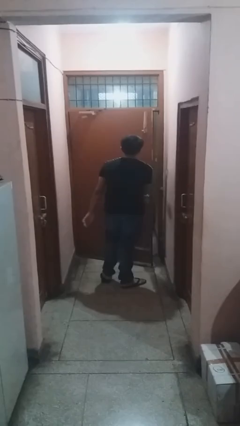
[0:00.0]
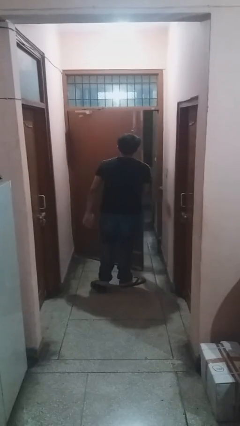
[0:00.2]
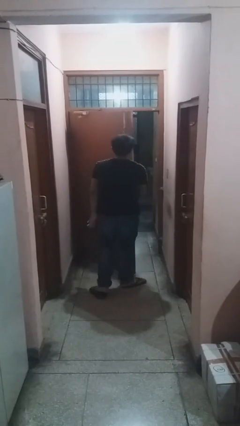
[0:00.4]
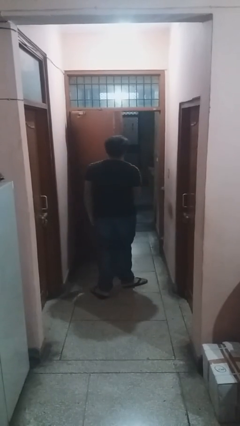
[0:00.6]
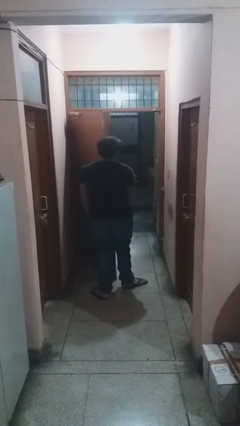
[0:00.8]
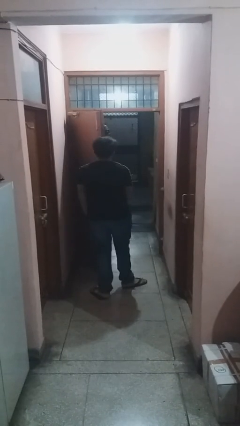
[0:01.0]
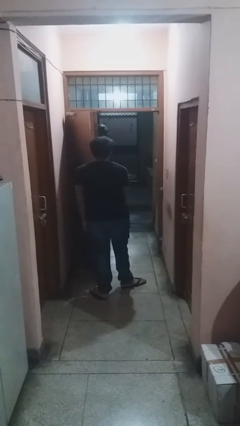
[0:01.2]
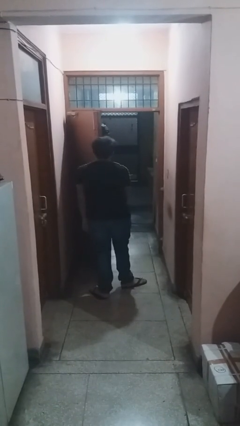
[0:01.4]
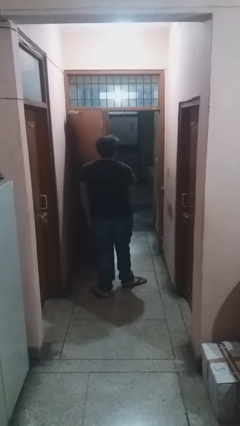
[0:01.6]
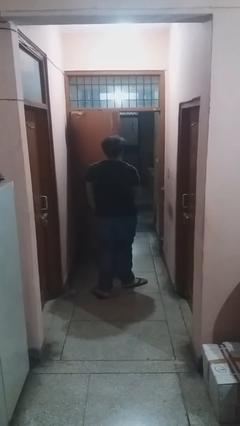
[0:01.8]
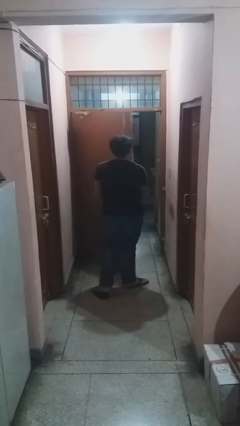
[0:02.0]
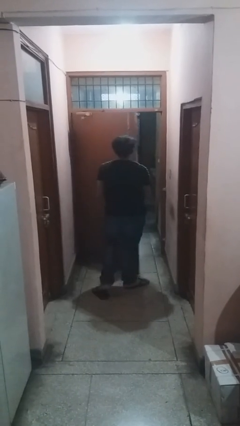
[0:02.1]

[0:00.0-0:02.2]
person opens facility door

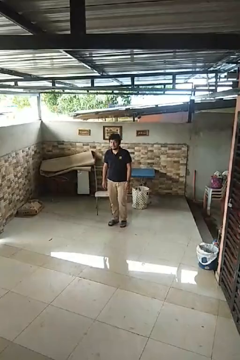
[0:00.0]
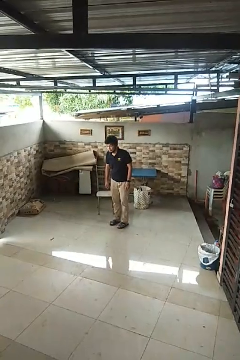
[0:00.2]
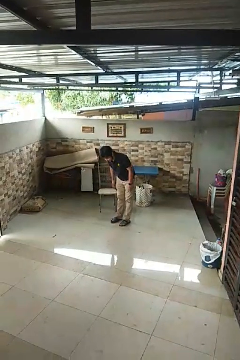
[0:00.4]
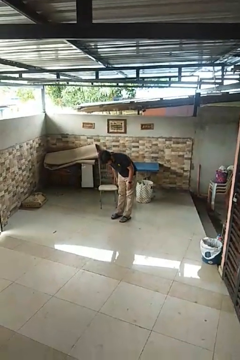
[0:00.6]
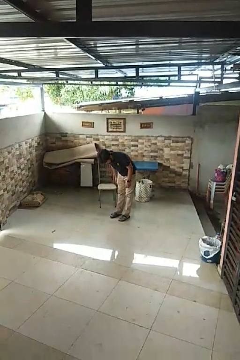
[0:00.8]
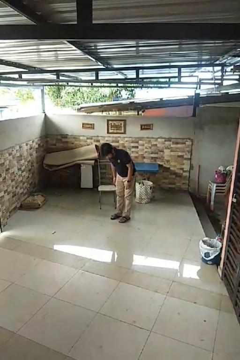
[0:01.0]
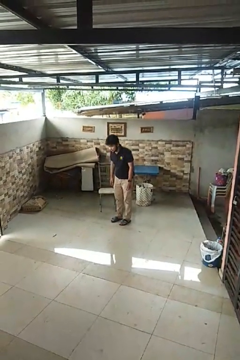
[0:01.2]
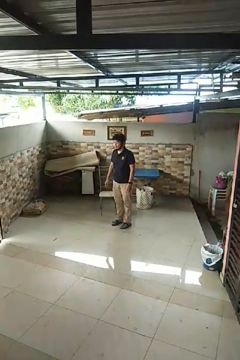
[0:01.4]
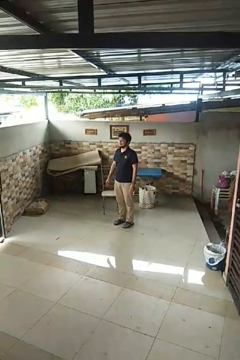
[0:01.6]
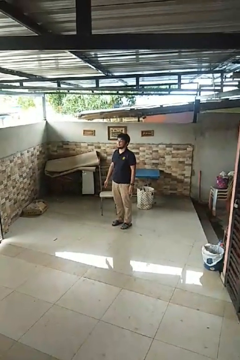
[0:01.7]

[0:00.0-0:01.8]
person bows

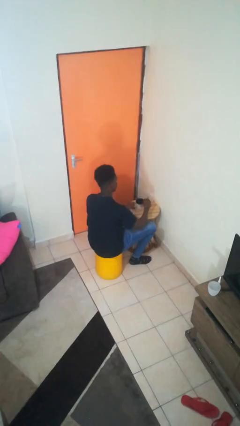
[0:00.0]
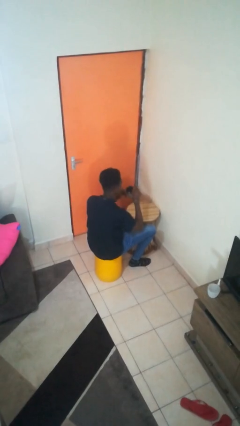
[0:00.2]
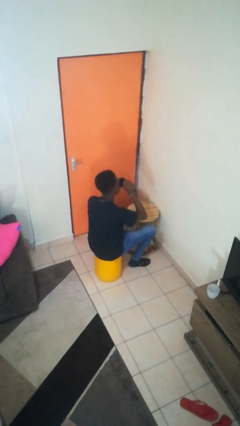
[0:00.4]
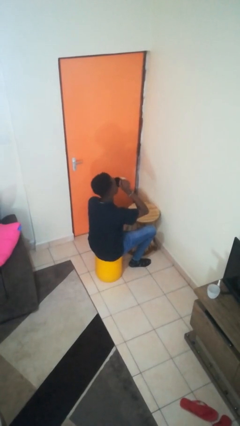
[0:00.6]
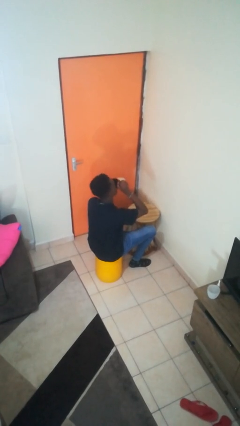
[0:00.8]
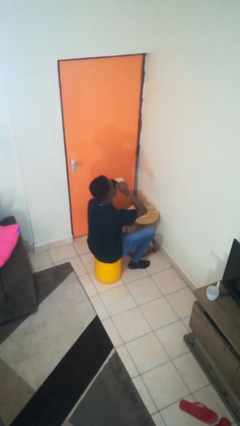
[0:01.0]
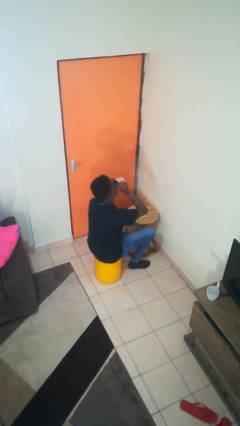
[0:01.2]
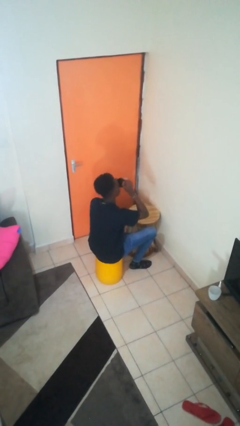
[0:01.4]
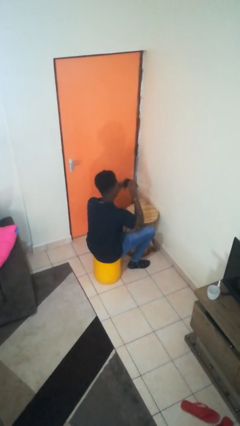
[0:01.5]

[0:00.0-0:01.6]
person drinks from mug

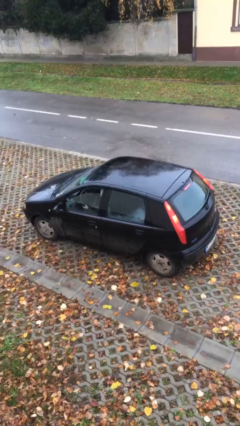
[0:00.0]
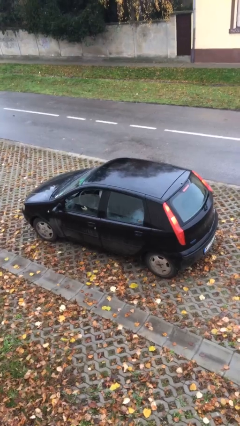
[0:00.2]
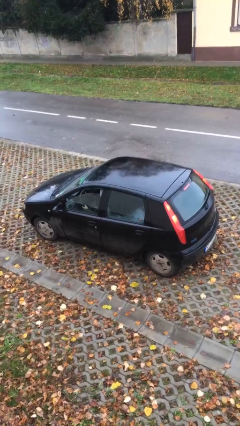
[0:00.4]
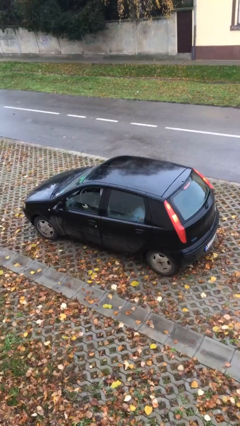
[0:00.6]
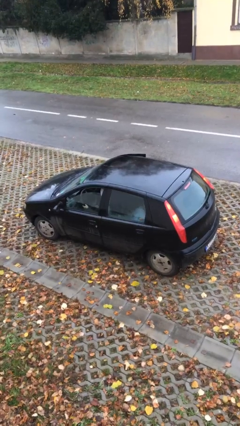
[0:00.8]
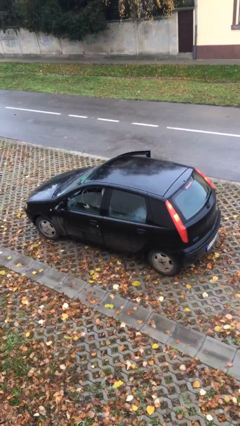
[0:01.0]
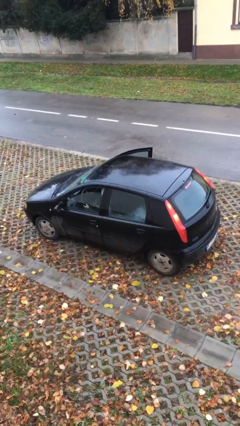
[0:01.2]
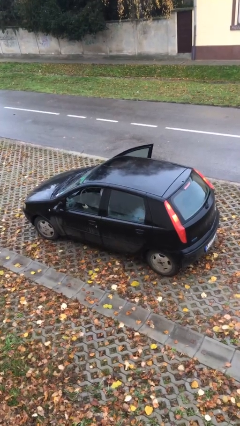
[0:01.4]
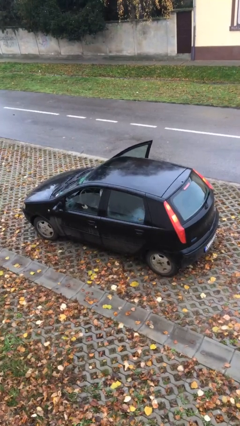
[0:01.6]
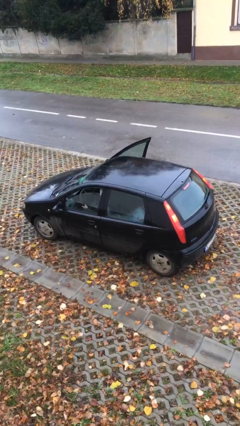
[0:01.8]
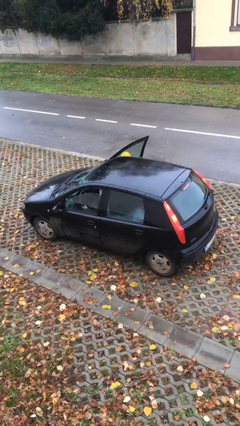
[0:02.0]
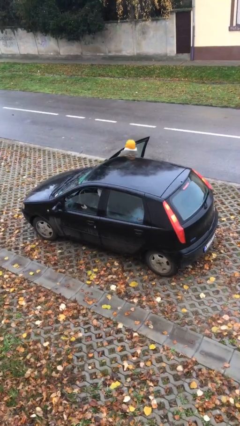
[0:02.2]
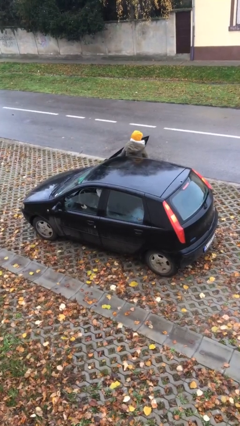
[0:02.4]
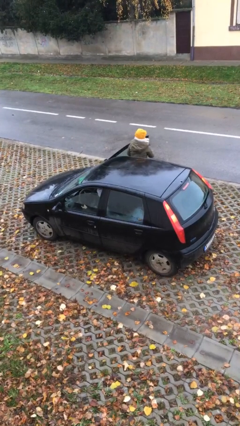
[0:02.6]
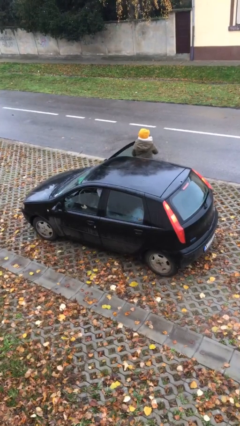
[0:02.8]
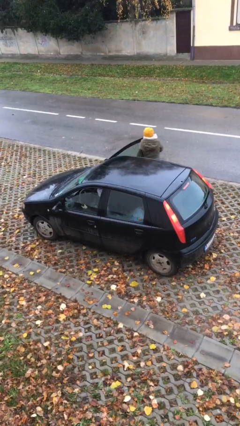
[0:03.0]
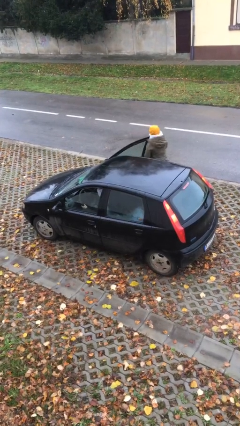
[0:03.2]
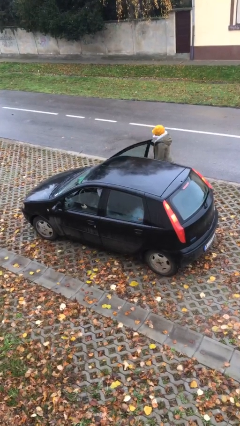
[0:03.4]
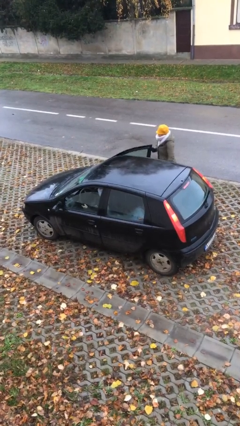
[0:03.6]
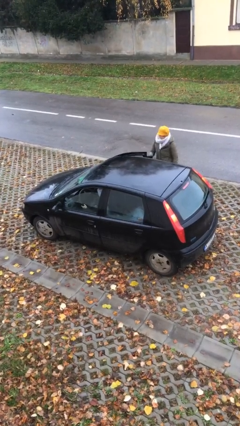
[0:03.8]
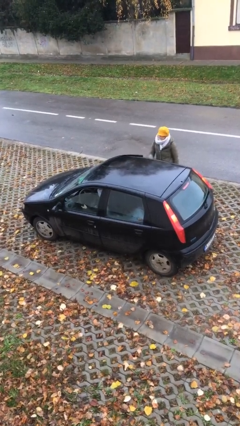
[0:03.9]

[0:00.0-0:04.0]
car drops off person

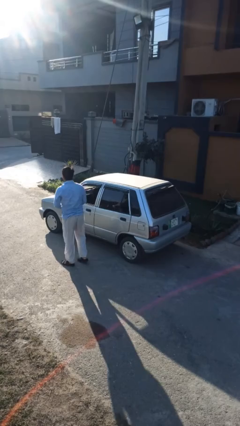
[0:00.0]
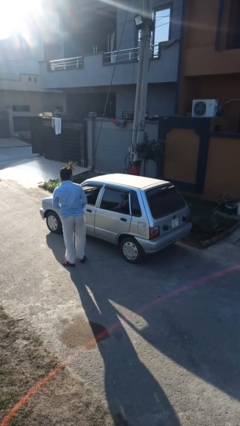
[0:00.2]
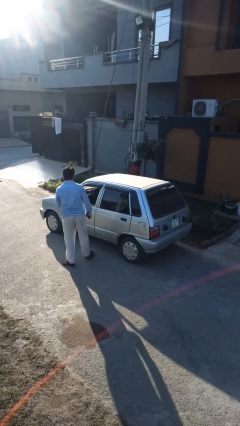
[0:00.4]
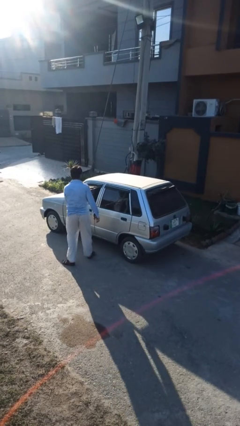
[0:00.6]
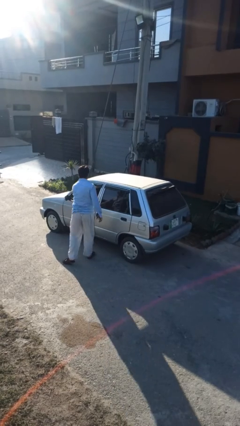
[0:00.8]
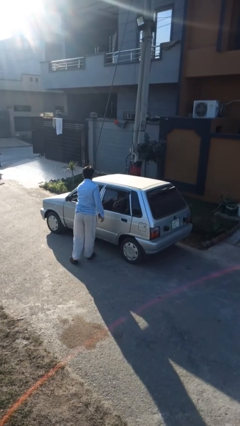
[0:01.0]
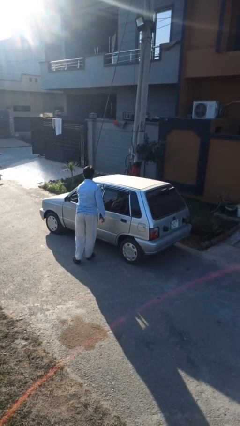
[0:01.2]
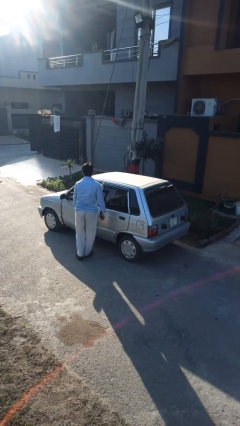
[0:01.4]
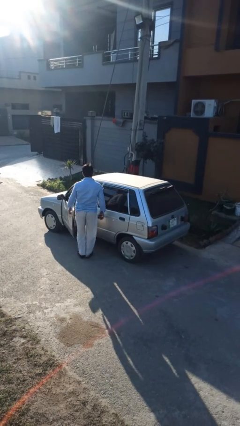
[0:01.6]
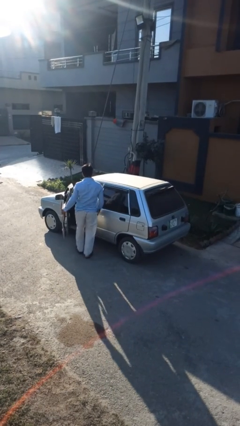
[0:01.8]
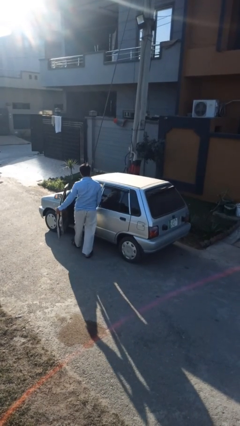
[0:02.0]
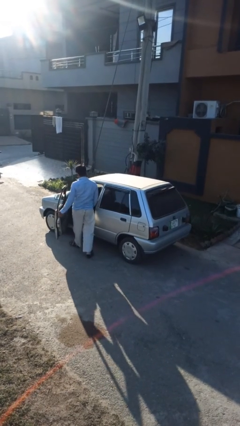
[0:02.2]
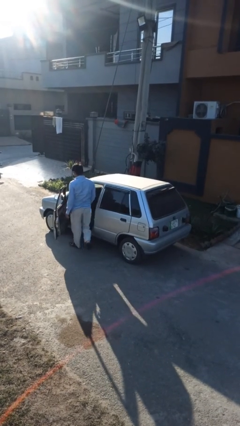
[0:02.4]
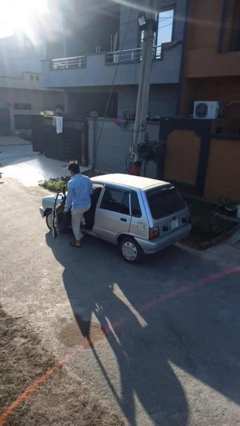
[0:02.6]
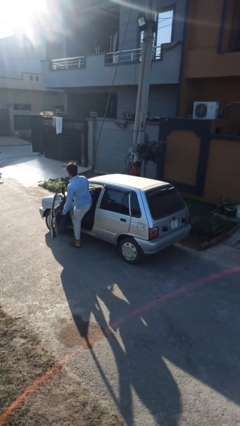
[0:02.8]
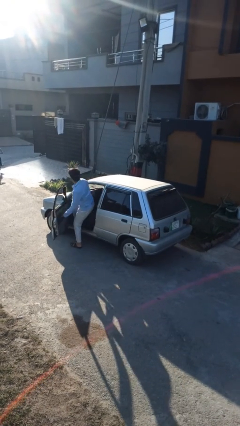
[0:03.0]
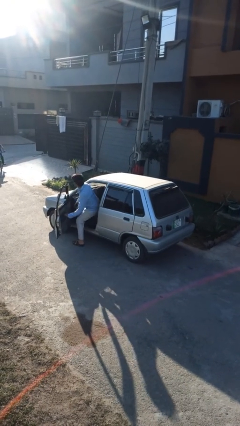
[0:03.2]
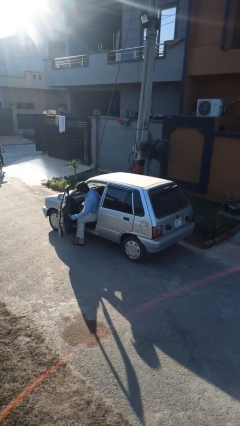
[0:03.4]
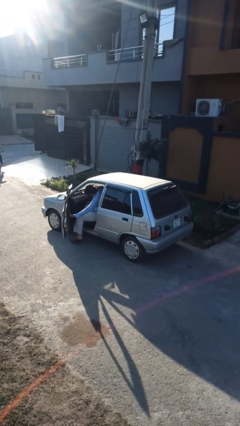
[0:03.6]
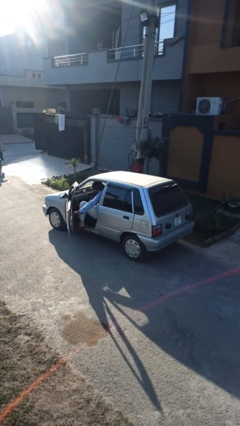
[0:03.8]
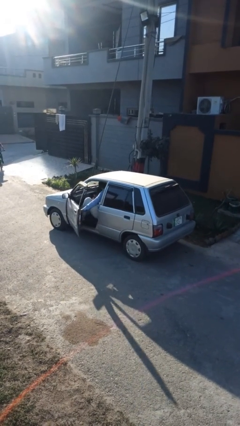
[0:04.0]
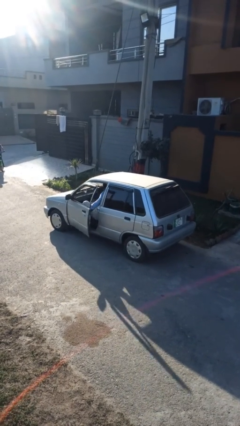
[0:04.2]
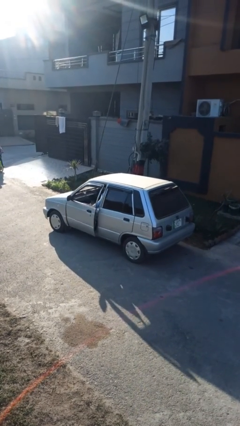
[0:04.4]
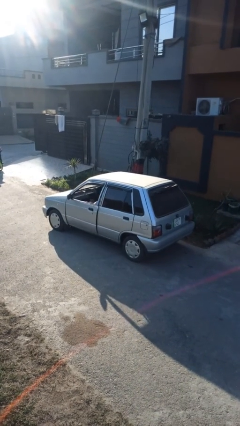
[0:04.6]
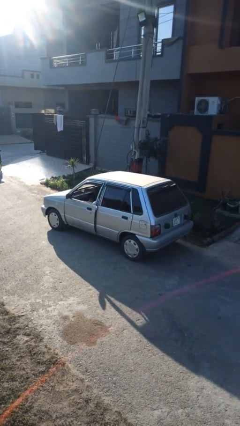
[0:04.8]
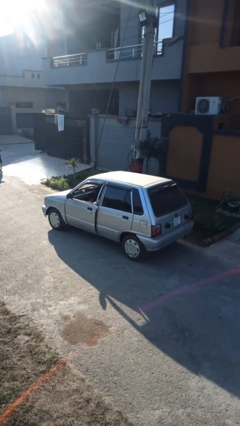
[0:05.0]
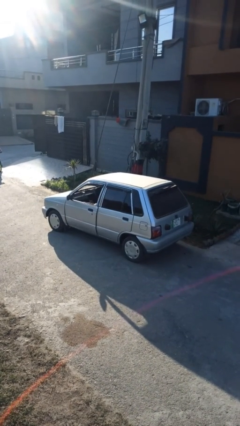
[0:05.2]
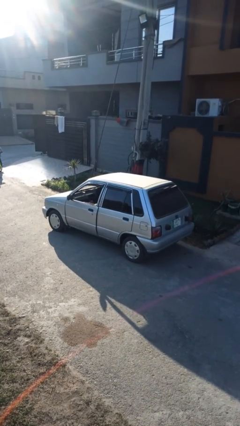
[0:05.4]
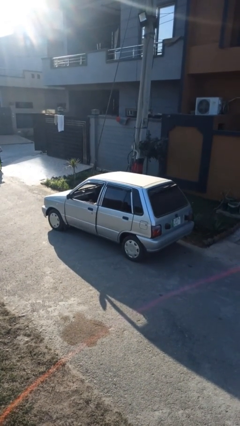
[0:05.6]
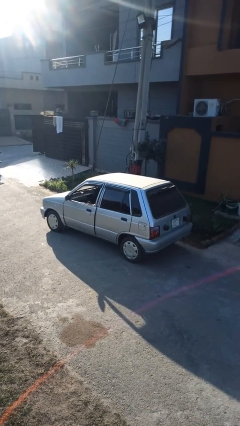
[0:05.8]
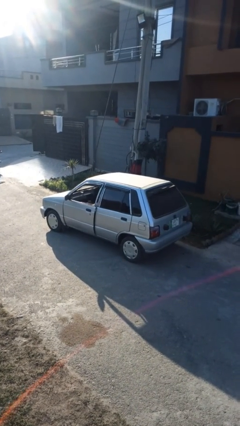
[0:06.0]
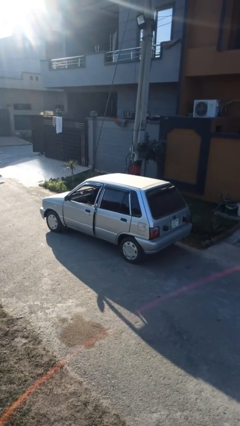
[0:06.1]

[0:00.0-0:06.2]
car picks up person

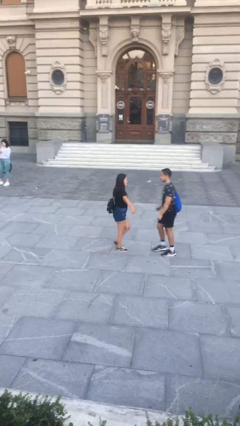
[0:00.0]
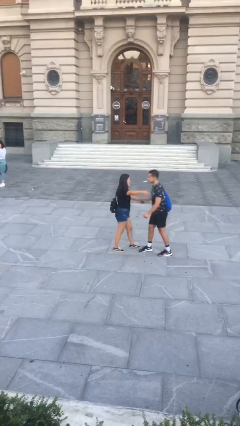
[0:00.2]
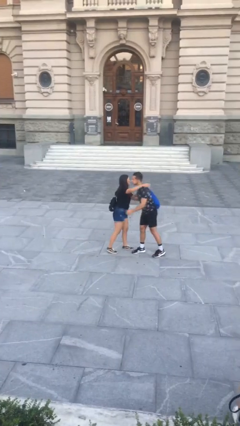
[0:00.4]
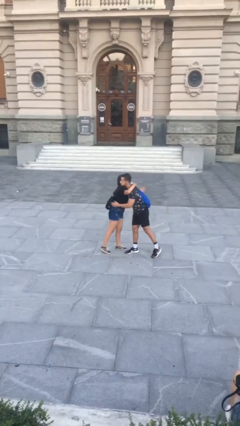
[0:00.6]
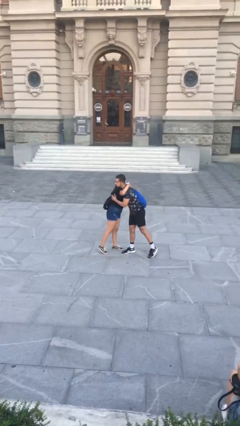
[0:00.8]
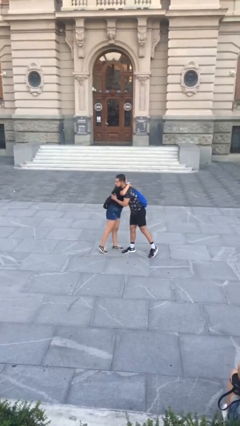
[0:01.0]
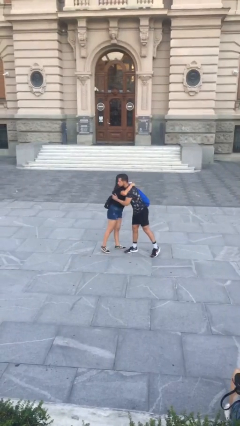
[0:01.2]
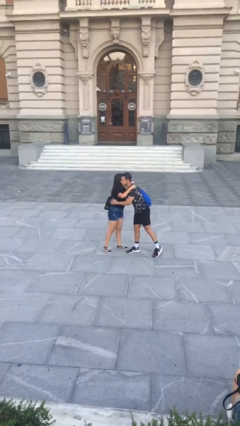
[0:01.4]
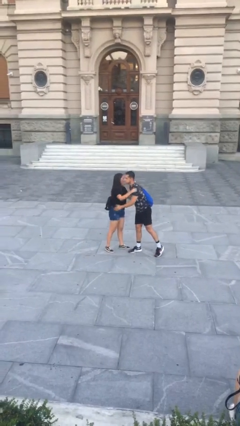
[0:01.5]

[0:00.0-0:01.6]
person embraces person

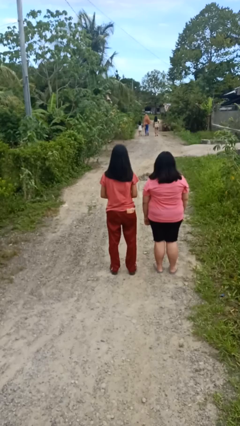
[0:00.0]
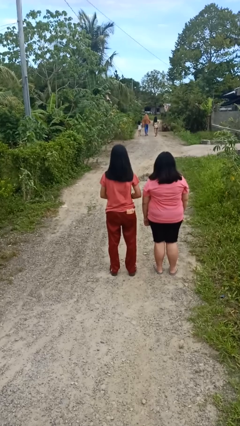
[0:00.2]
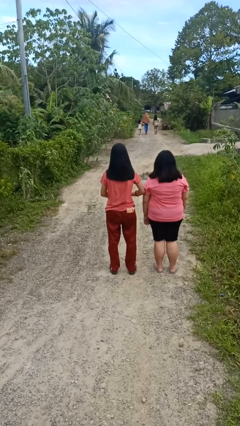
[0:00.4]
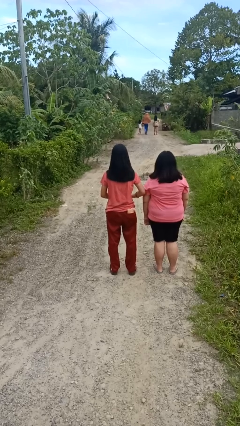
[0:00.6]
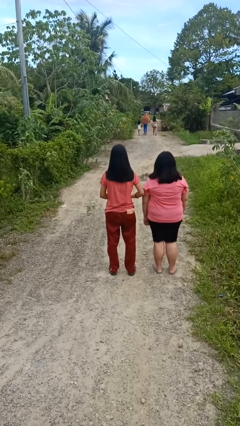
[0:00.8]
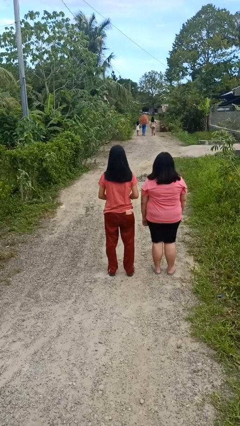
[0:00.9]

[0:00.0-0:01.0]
person nudges person with elbow
